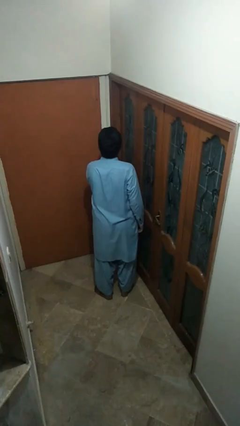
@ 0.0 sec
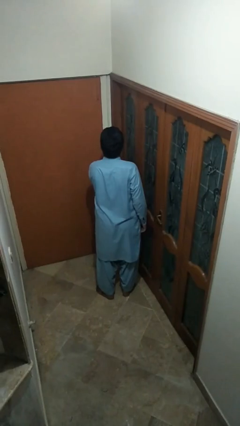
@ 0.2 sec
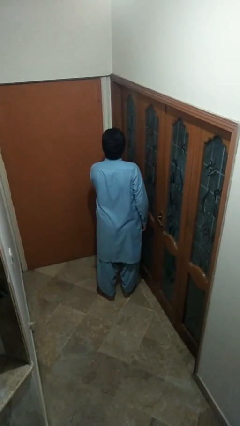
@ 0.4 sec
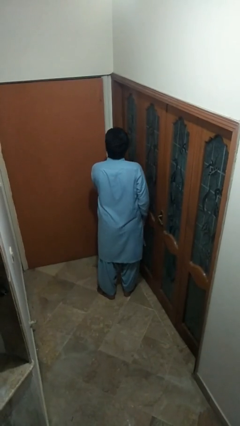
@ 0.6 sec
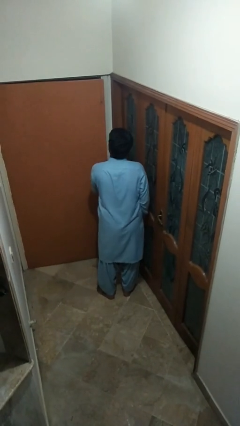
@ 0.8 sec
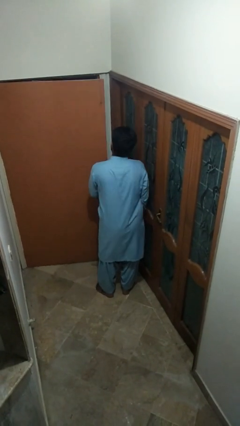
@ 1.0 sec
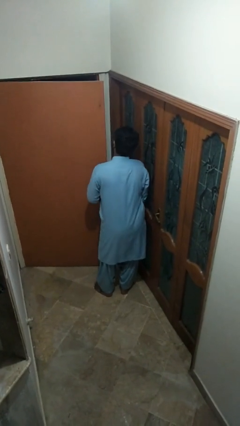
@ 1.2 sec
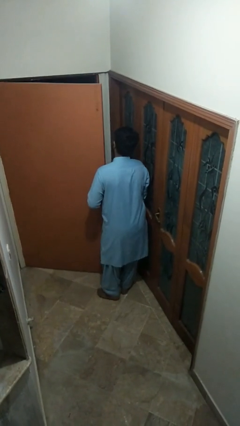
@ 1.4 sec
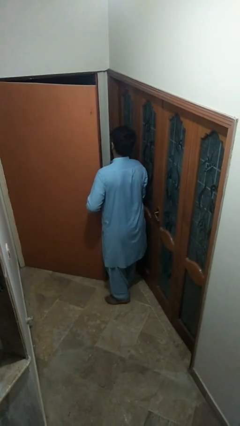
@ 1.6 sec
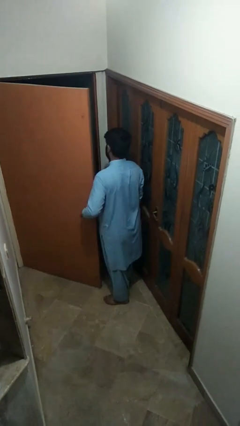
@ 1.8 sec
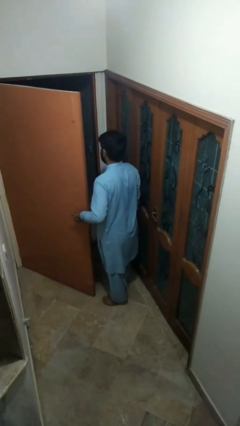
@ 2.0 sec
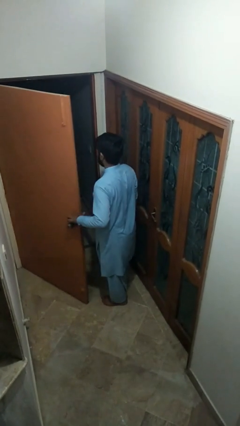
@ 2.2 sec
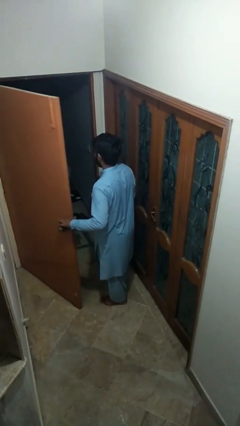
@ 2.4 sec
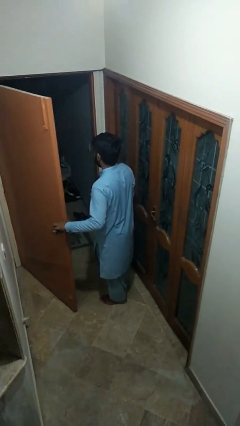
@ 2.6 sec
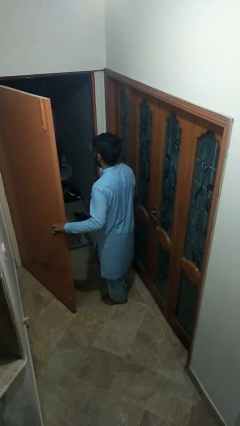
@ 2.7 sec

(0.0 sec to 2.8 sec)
person opens facility door

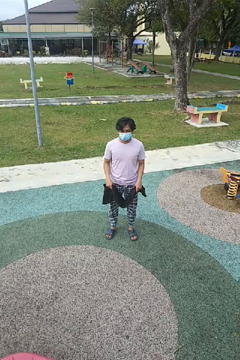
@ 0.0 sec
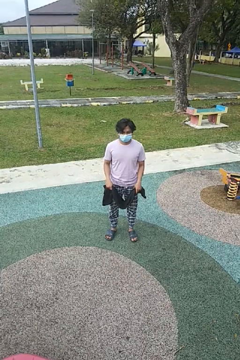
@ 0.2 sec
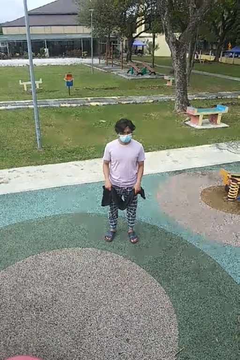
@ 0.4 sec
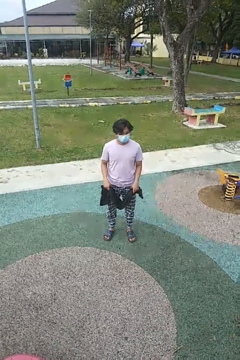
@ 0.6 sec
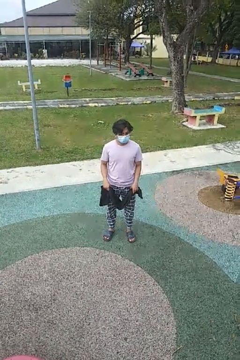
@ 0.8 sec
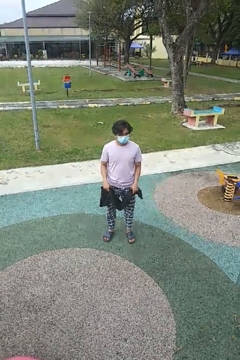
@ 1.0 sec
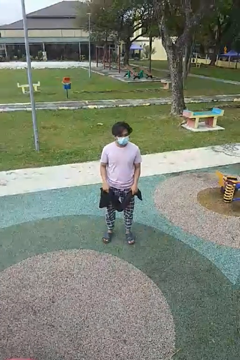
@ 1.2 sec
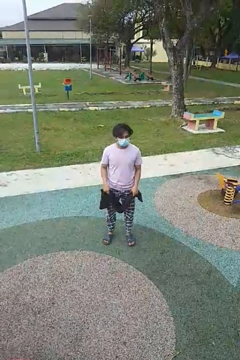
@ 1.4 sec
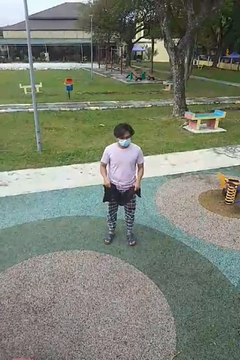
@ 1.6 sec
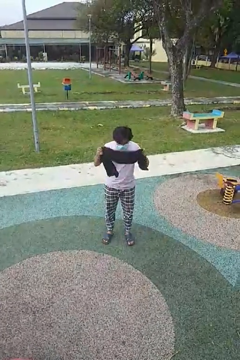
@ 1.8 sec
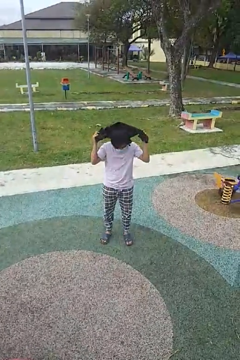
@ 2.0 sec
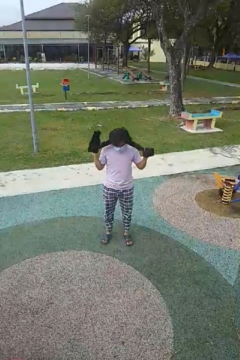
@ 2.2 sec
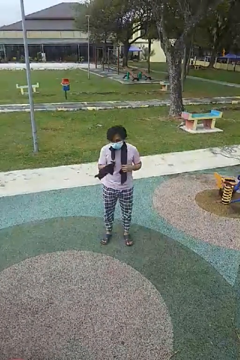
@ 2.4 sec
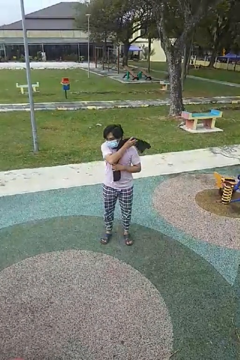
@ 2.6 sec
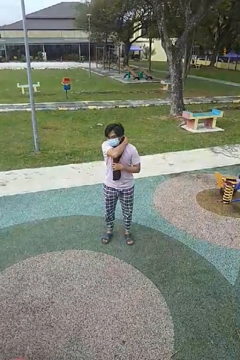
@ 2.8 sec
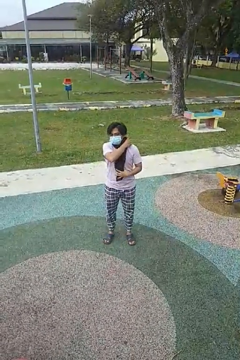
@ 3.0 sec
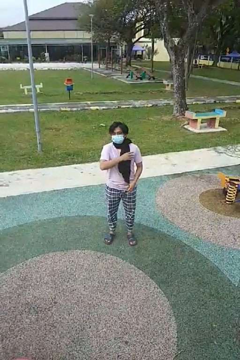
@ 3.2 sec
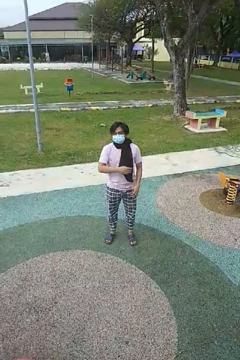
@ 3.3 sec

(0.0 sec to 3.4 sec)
person puts on scarf

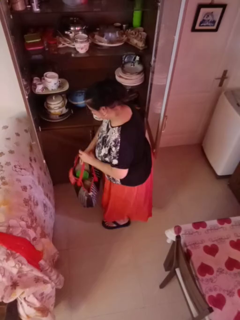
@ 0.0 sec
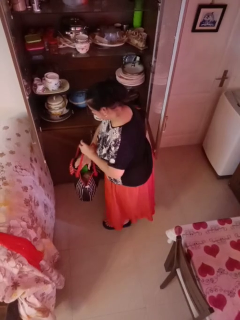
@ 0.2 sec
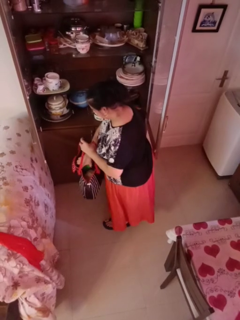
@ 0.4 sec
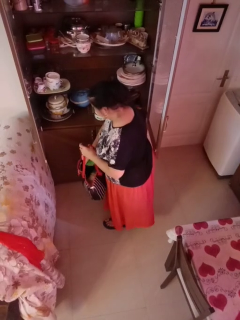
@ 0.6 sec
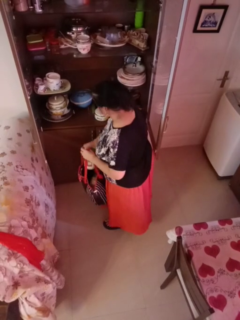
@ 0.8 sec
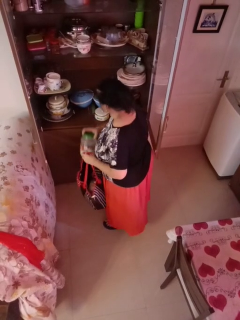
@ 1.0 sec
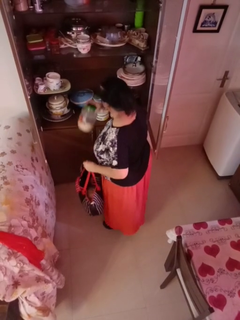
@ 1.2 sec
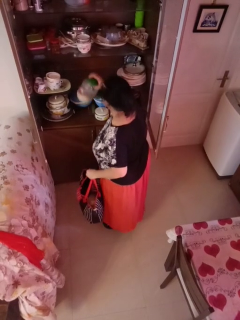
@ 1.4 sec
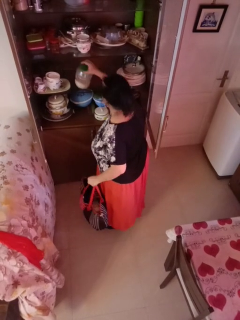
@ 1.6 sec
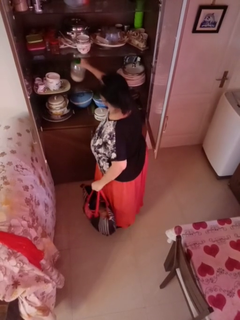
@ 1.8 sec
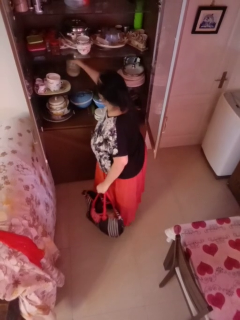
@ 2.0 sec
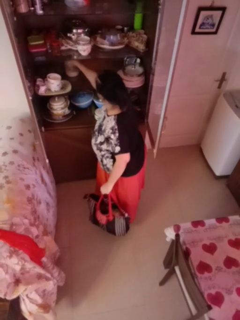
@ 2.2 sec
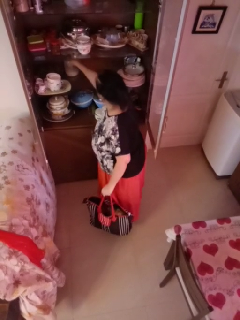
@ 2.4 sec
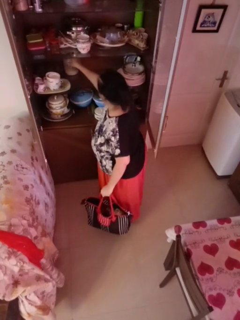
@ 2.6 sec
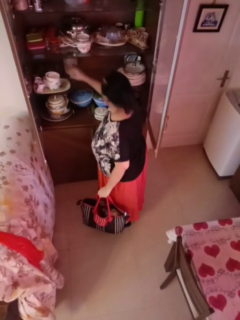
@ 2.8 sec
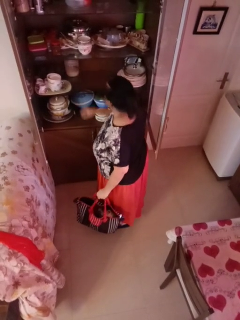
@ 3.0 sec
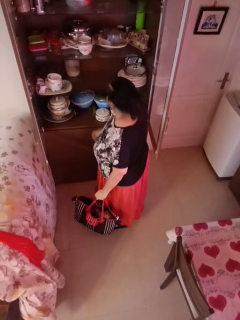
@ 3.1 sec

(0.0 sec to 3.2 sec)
person loads groceries into cabinet

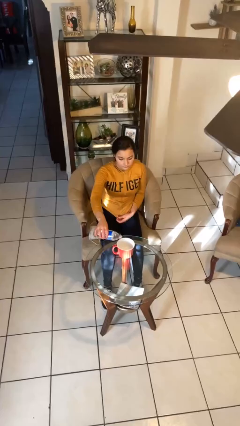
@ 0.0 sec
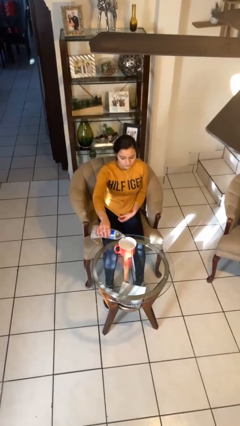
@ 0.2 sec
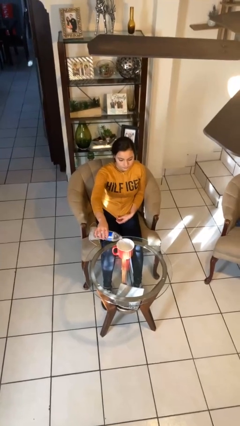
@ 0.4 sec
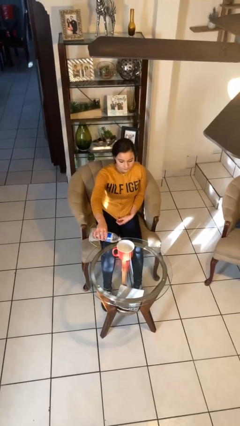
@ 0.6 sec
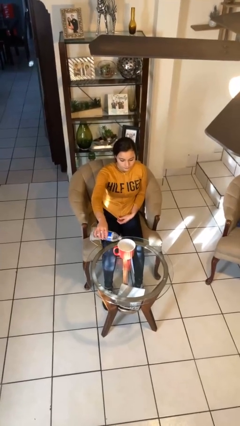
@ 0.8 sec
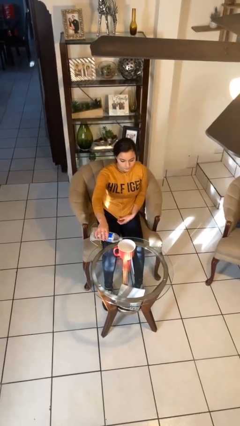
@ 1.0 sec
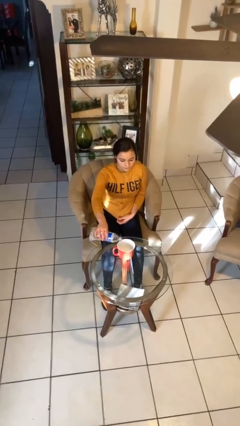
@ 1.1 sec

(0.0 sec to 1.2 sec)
person pours liquid into cup

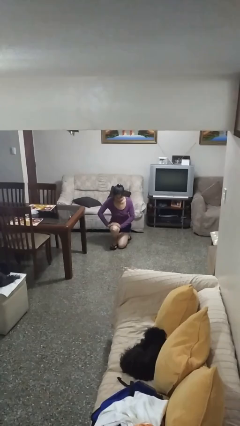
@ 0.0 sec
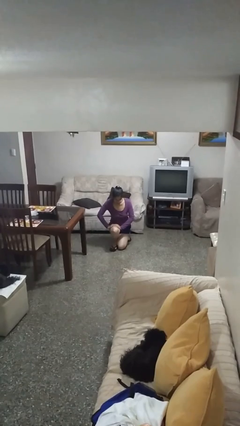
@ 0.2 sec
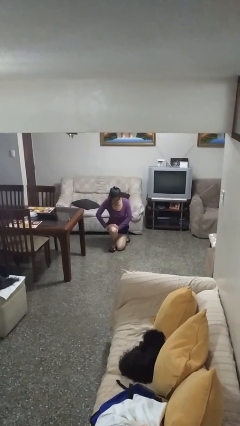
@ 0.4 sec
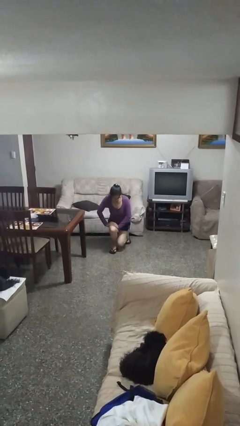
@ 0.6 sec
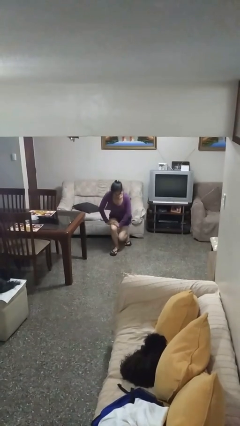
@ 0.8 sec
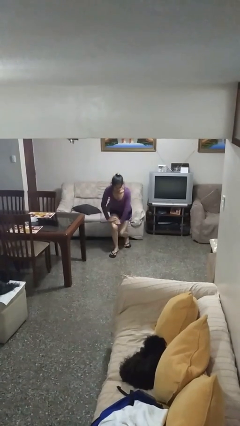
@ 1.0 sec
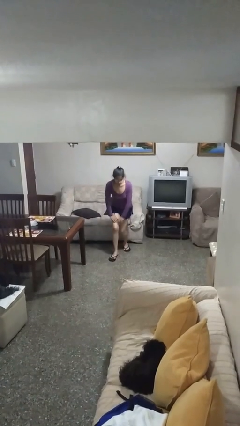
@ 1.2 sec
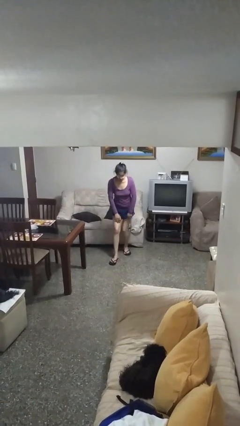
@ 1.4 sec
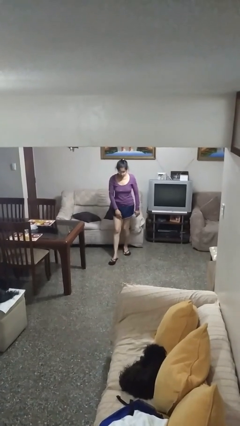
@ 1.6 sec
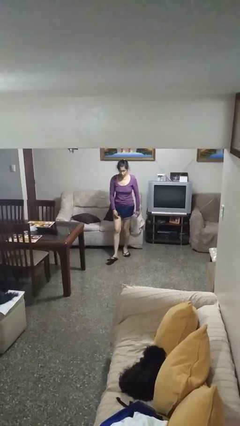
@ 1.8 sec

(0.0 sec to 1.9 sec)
person stands up from floor

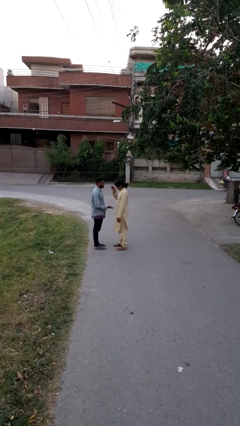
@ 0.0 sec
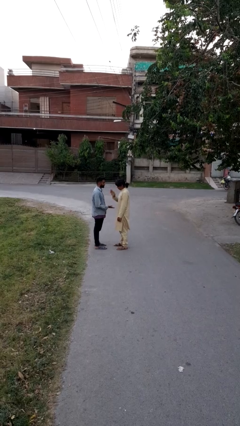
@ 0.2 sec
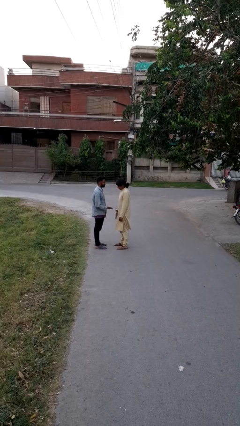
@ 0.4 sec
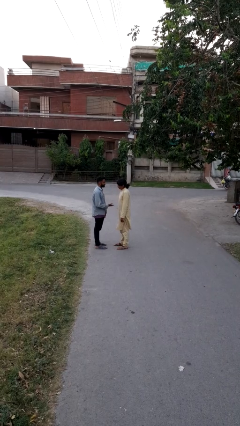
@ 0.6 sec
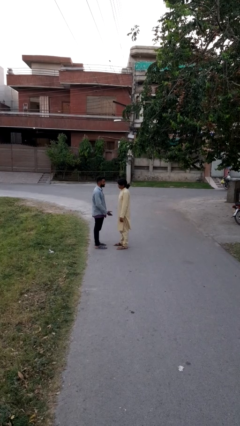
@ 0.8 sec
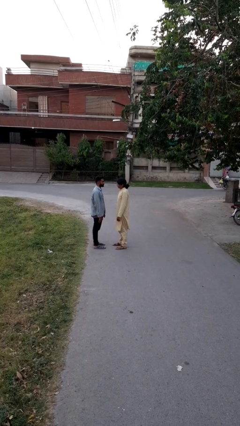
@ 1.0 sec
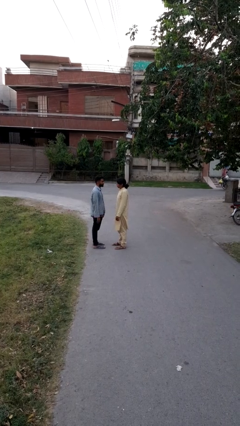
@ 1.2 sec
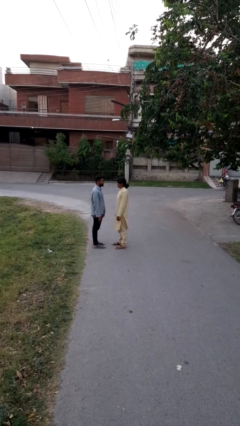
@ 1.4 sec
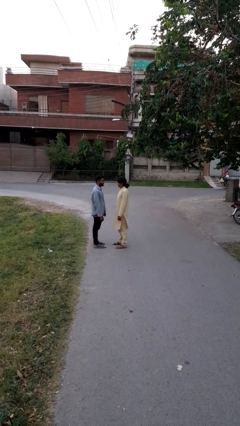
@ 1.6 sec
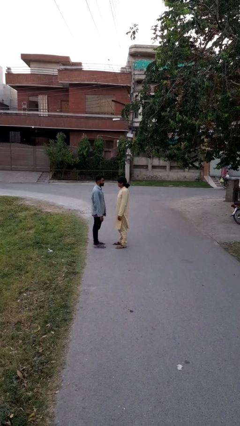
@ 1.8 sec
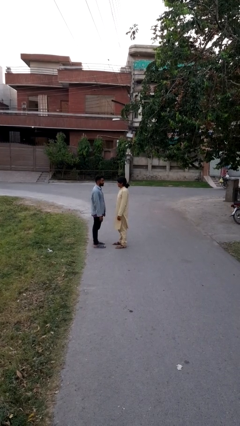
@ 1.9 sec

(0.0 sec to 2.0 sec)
person highfives hand

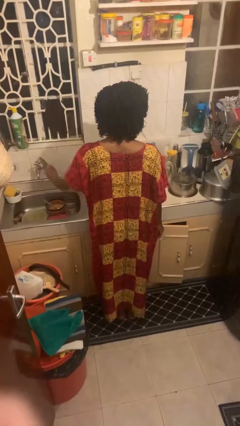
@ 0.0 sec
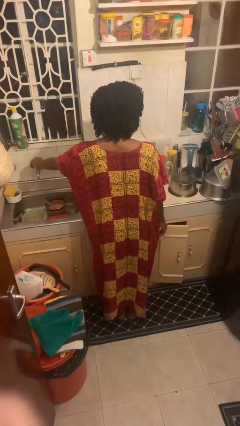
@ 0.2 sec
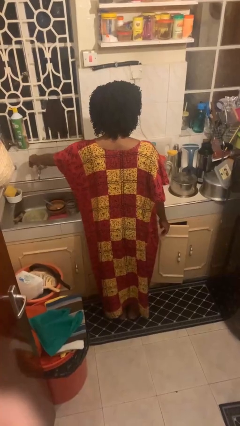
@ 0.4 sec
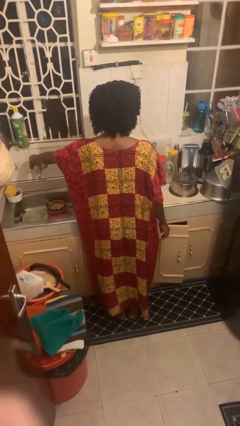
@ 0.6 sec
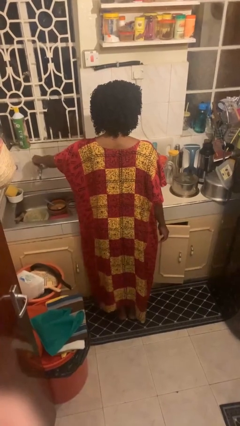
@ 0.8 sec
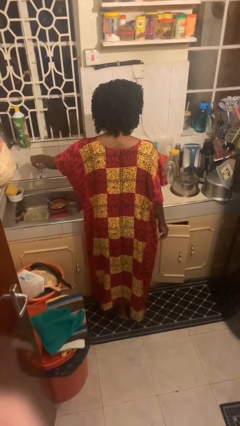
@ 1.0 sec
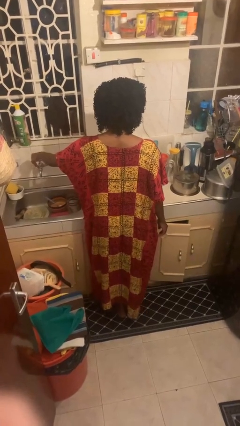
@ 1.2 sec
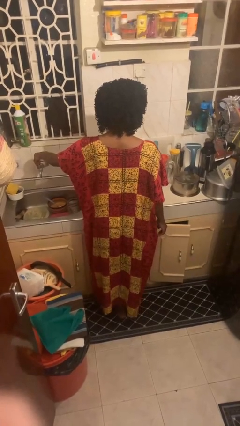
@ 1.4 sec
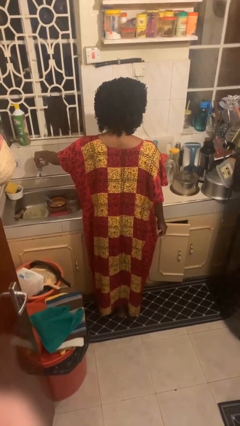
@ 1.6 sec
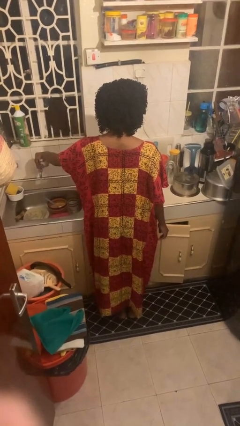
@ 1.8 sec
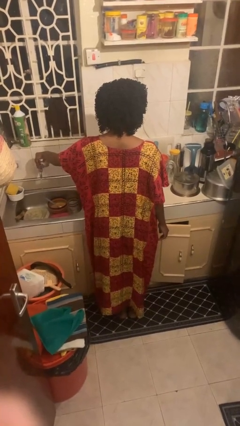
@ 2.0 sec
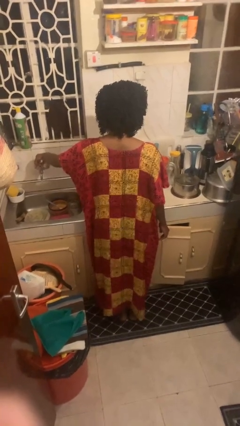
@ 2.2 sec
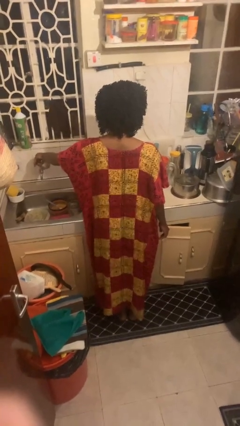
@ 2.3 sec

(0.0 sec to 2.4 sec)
person turns on faucet

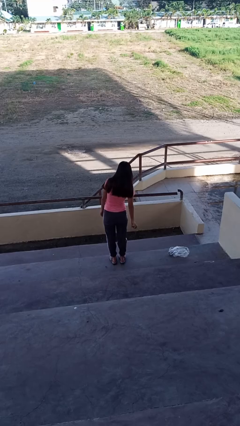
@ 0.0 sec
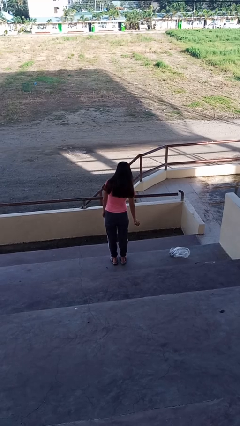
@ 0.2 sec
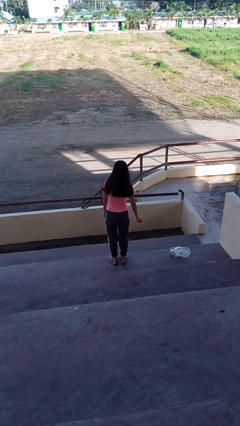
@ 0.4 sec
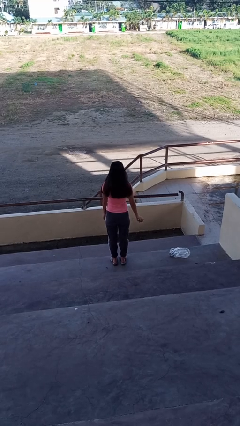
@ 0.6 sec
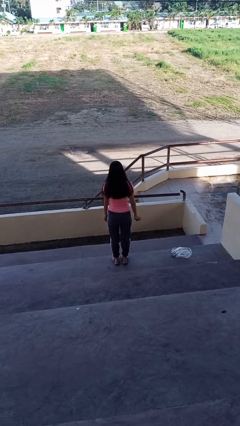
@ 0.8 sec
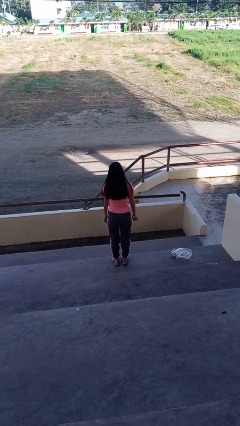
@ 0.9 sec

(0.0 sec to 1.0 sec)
person catches dropped object

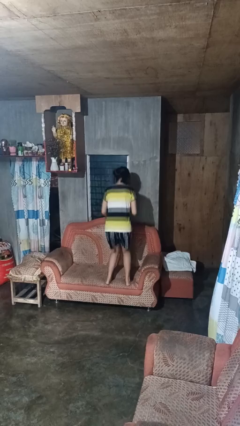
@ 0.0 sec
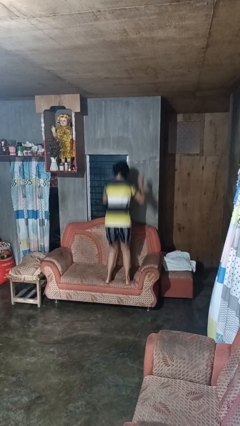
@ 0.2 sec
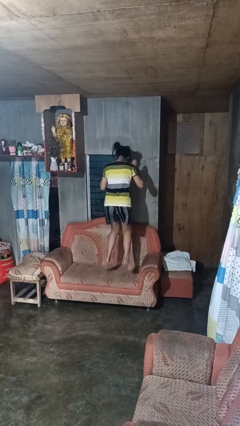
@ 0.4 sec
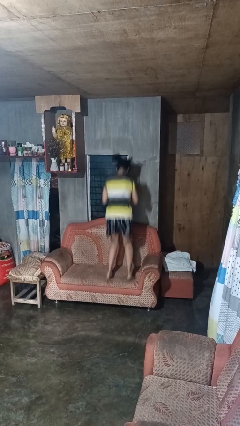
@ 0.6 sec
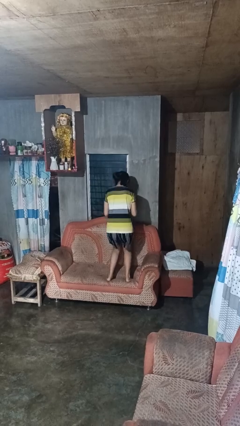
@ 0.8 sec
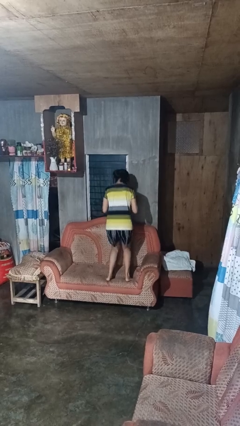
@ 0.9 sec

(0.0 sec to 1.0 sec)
person jumps on couch
